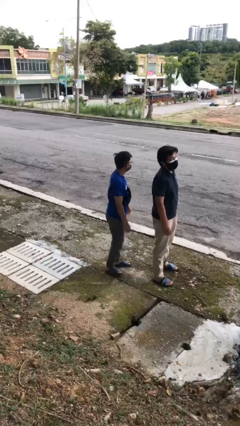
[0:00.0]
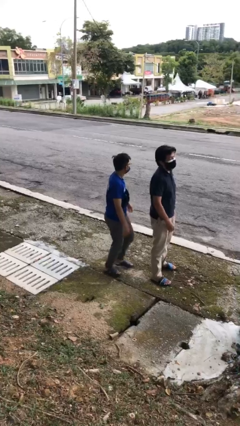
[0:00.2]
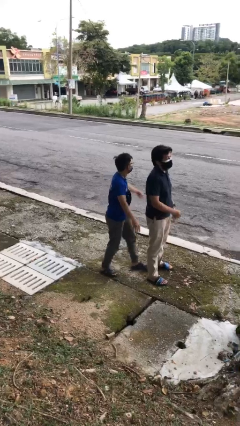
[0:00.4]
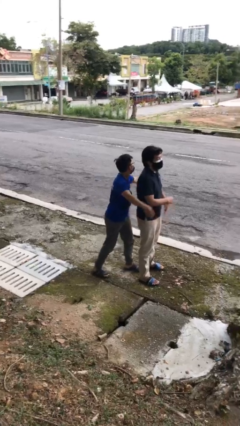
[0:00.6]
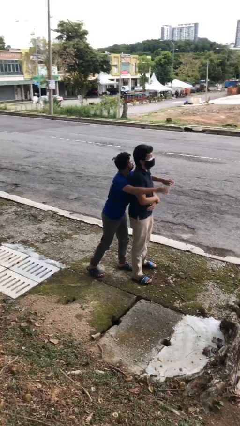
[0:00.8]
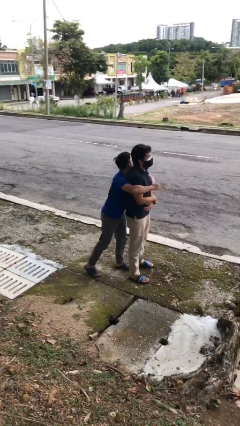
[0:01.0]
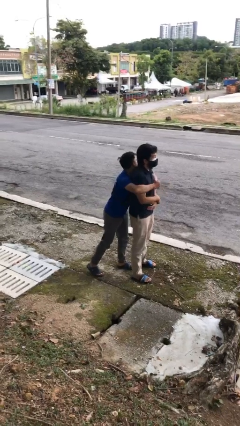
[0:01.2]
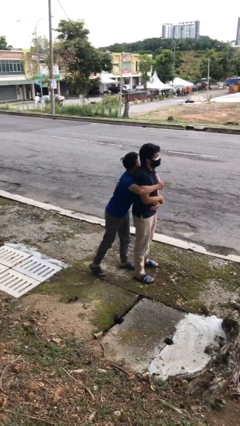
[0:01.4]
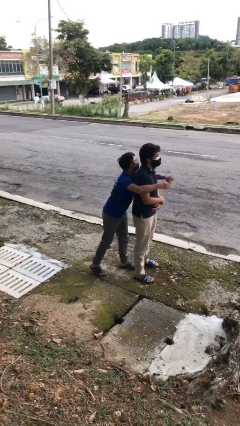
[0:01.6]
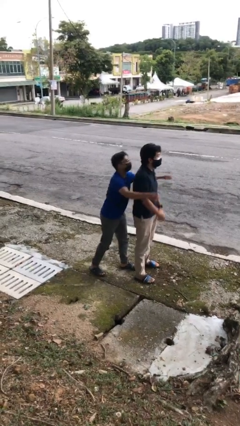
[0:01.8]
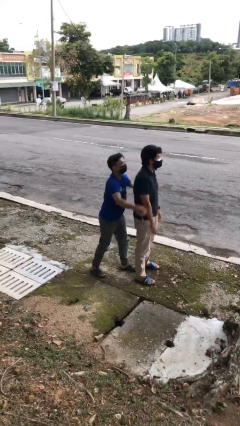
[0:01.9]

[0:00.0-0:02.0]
person hugs person from behind

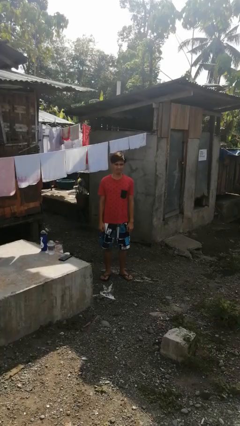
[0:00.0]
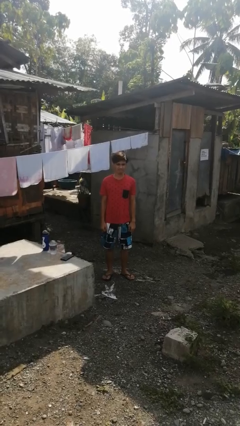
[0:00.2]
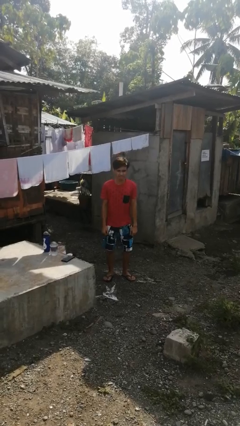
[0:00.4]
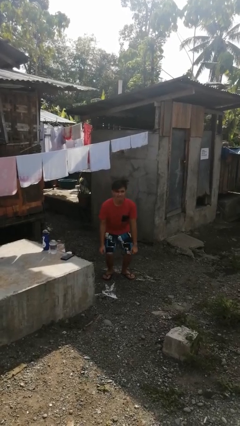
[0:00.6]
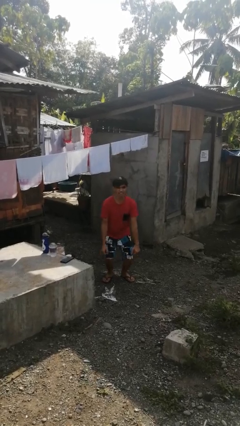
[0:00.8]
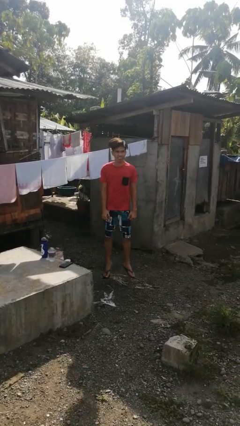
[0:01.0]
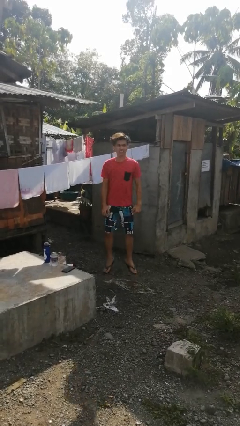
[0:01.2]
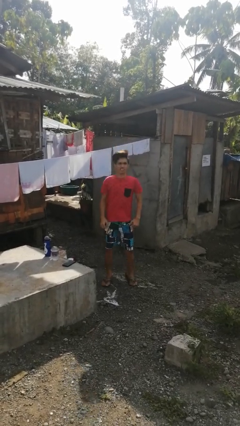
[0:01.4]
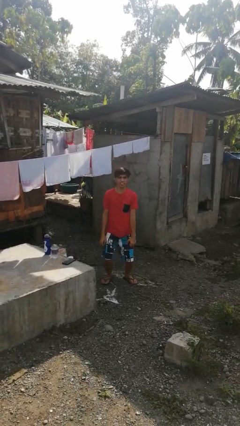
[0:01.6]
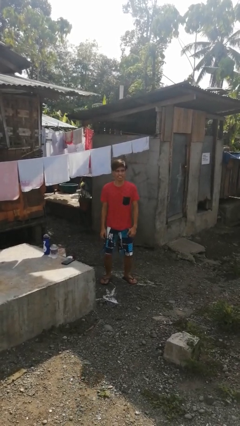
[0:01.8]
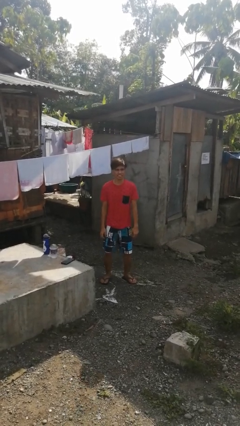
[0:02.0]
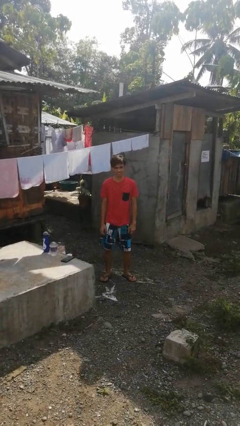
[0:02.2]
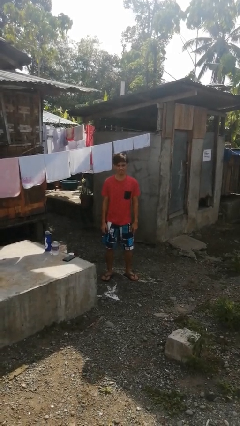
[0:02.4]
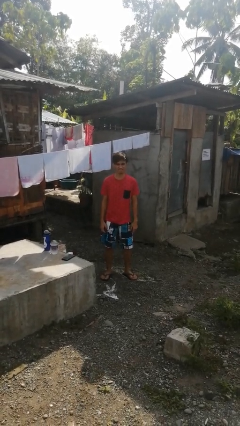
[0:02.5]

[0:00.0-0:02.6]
person jumps

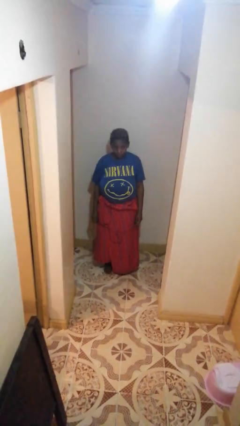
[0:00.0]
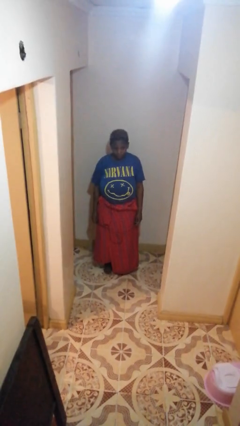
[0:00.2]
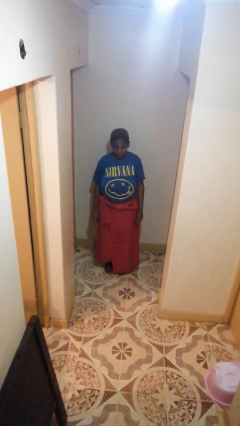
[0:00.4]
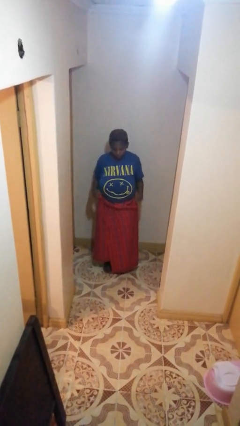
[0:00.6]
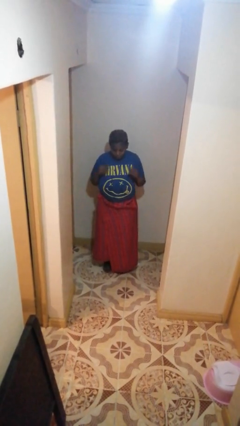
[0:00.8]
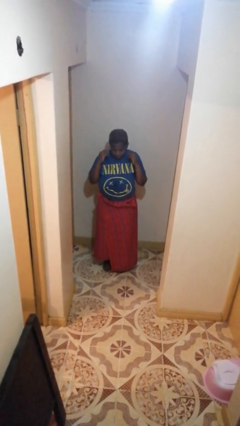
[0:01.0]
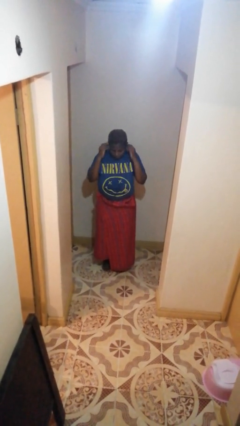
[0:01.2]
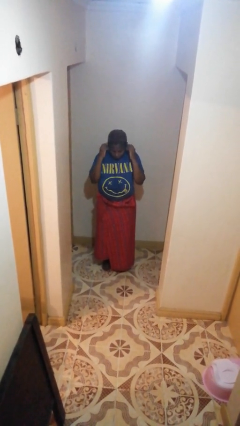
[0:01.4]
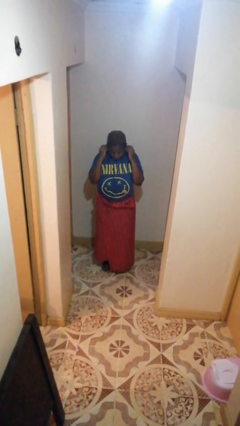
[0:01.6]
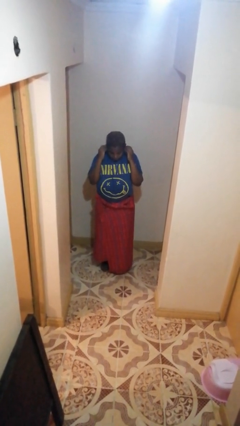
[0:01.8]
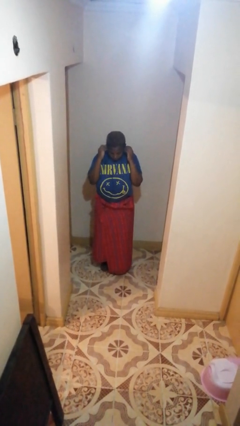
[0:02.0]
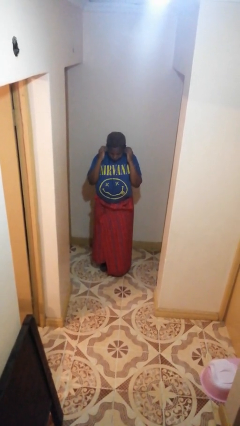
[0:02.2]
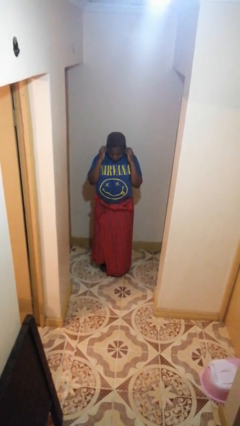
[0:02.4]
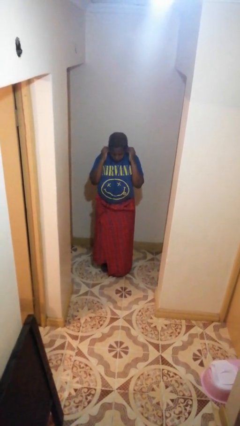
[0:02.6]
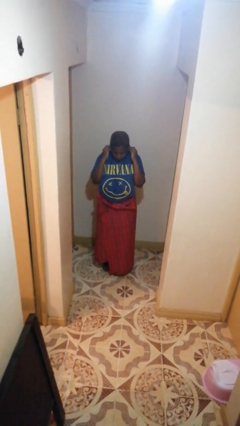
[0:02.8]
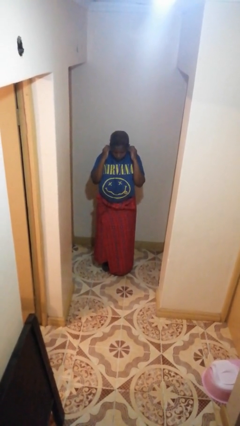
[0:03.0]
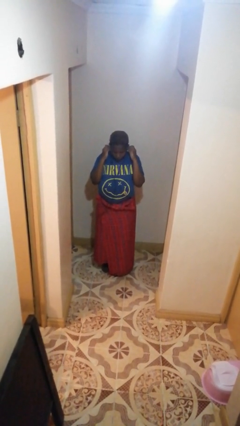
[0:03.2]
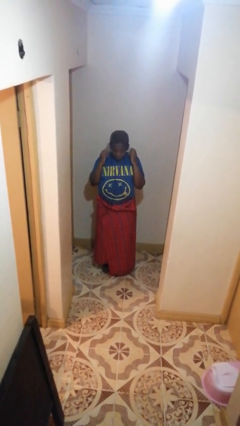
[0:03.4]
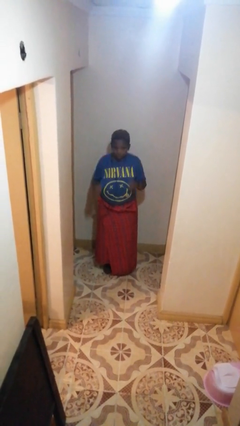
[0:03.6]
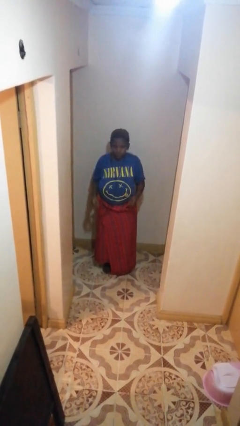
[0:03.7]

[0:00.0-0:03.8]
person puts on headphones

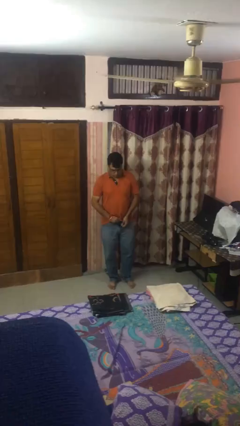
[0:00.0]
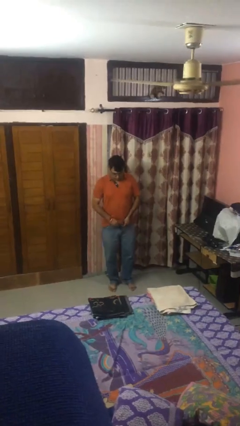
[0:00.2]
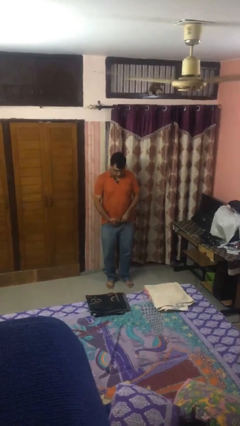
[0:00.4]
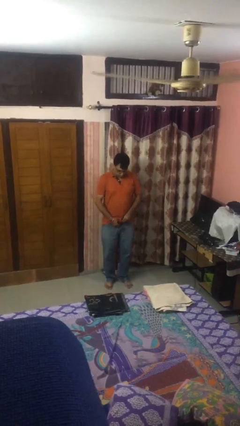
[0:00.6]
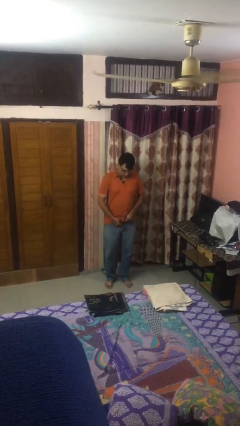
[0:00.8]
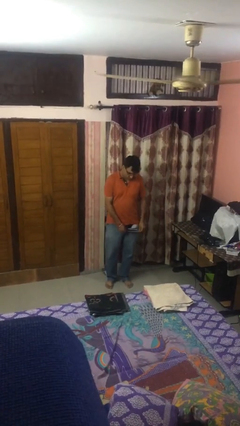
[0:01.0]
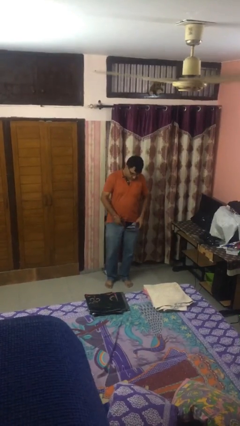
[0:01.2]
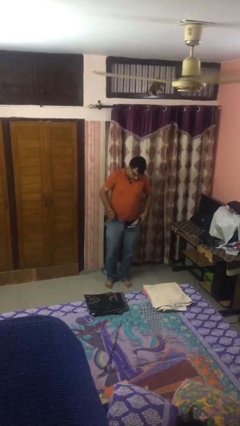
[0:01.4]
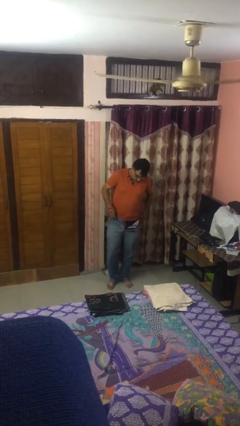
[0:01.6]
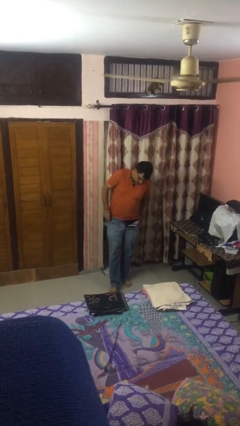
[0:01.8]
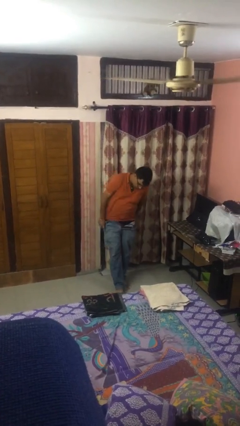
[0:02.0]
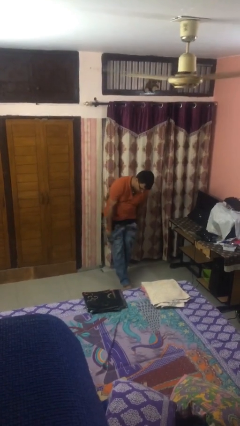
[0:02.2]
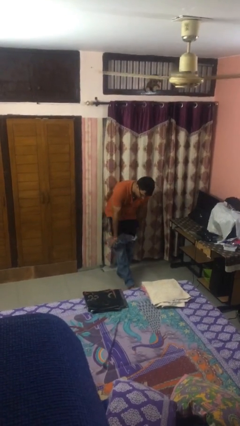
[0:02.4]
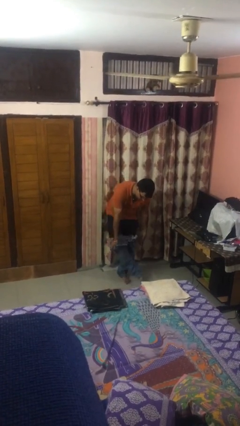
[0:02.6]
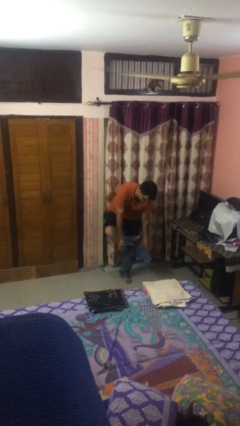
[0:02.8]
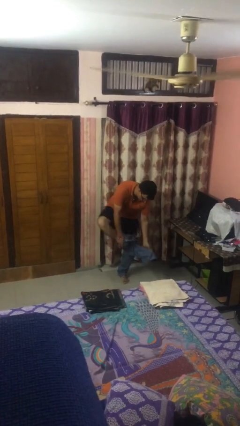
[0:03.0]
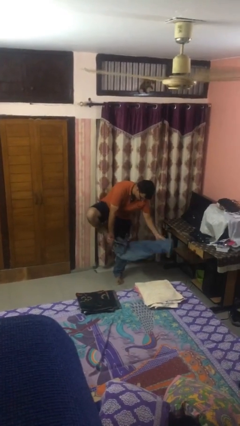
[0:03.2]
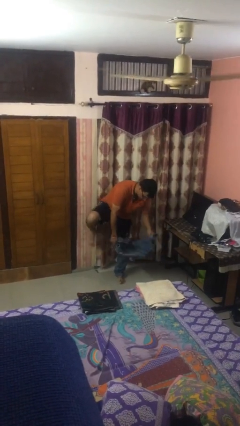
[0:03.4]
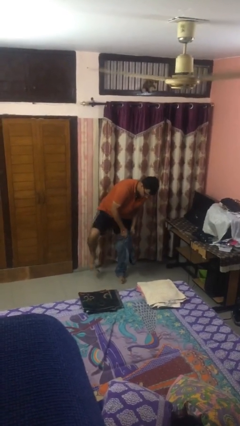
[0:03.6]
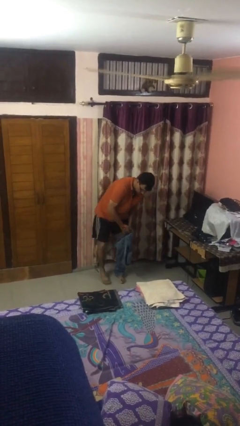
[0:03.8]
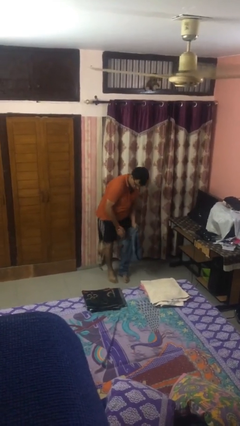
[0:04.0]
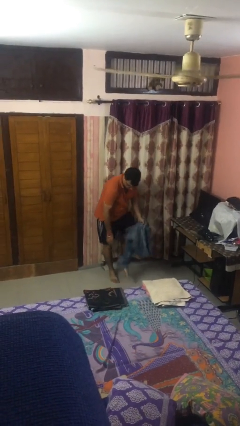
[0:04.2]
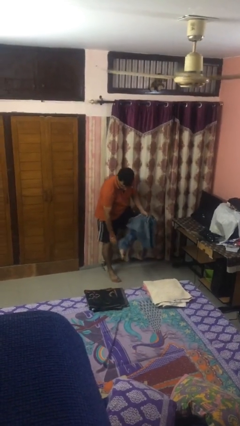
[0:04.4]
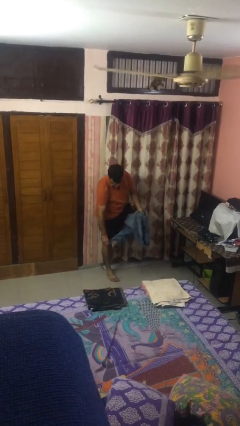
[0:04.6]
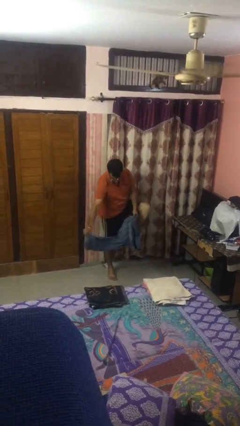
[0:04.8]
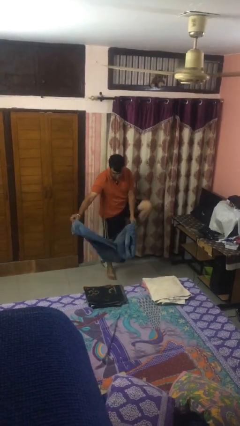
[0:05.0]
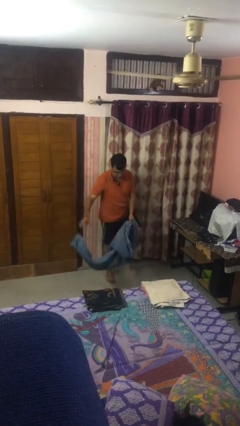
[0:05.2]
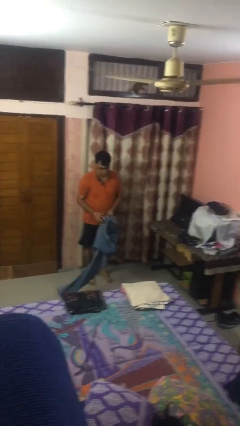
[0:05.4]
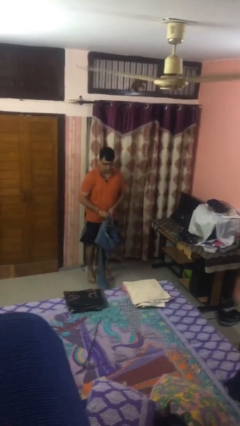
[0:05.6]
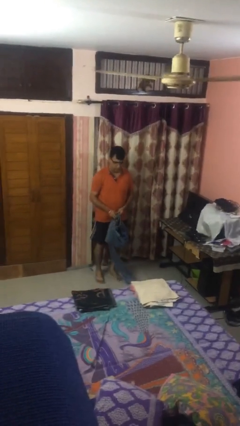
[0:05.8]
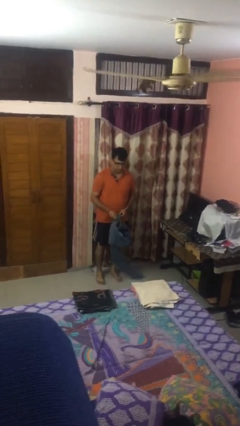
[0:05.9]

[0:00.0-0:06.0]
person takes off pants

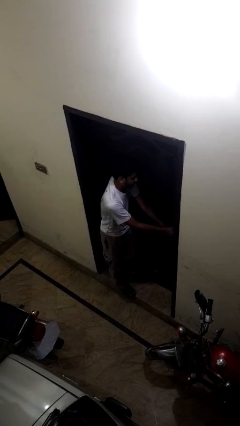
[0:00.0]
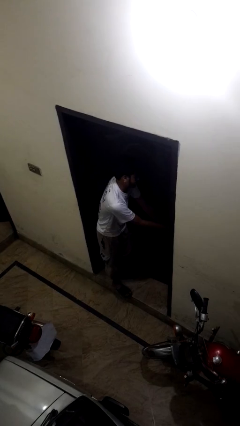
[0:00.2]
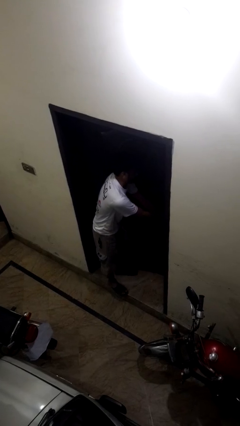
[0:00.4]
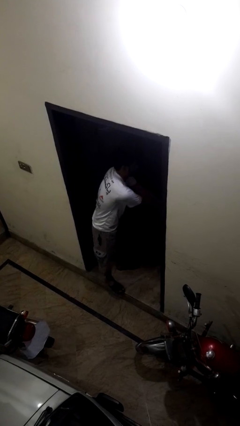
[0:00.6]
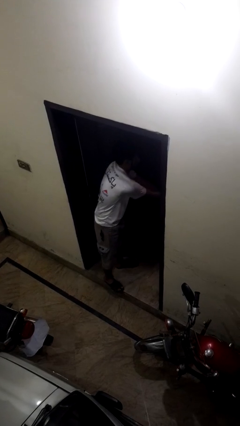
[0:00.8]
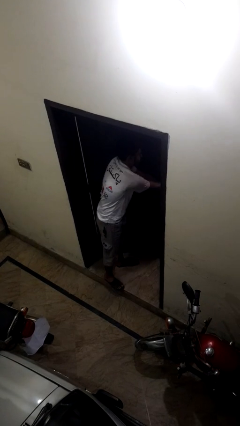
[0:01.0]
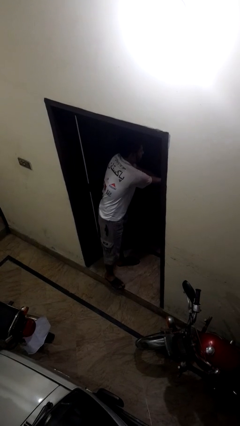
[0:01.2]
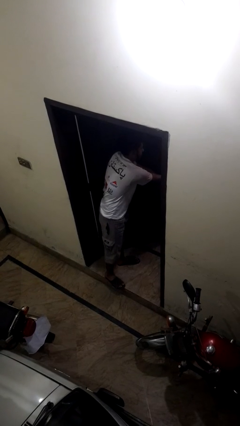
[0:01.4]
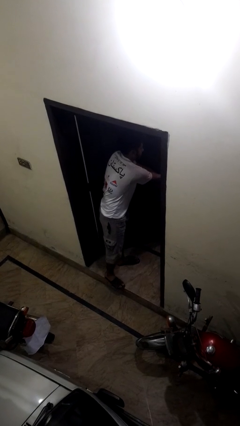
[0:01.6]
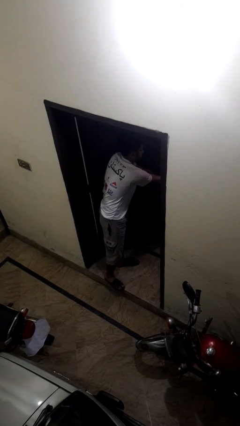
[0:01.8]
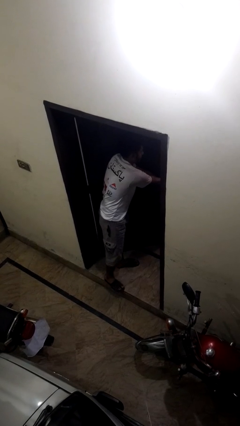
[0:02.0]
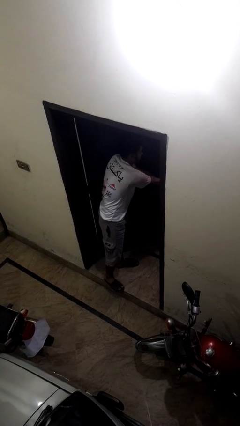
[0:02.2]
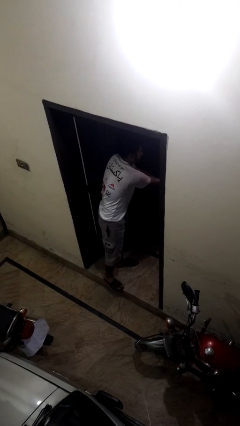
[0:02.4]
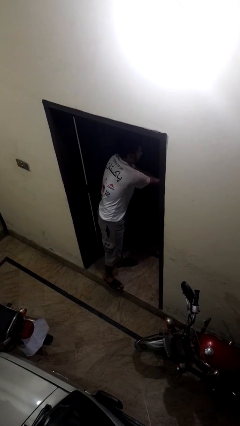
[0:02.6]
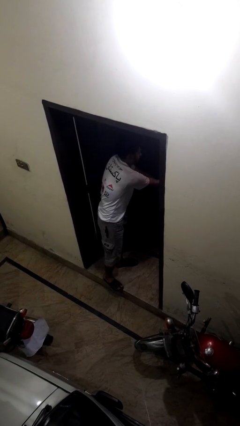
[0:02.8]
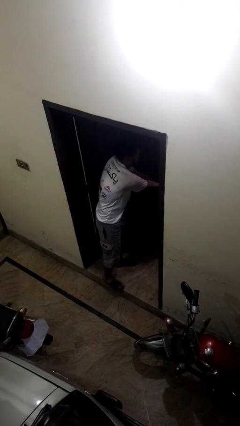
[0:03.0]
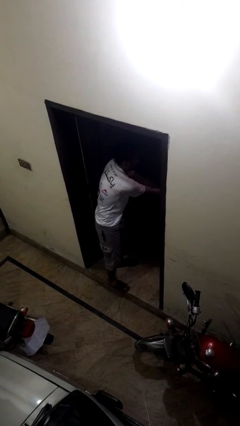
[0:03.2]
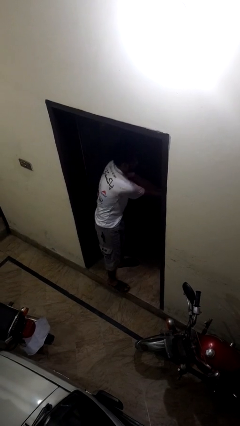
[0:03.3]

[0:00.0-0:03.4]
person opens facility door
